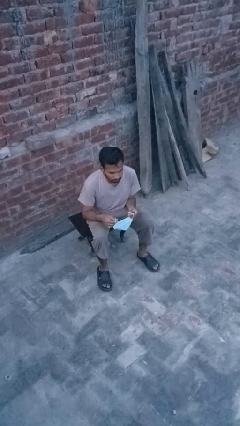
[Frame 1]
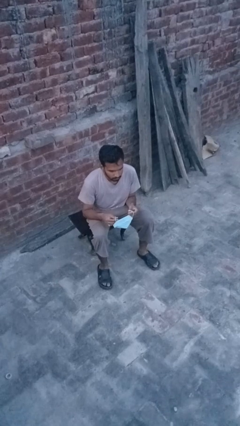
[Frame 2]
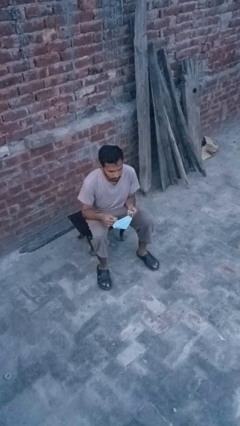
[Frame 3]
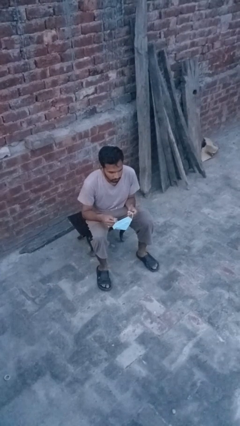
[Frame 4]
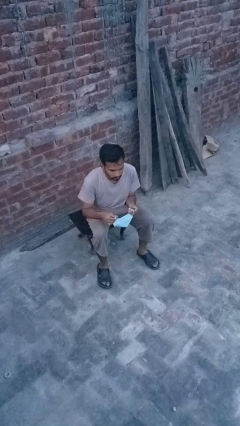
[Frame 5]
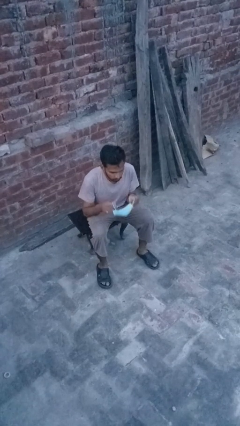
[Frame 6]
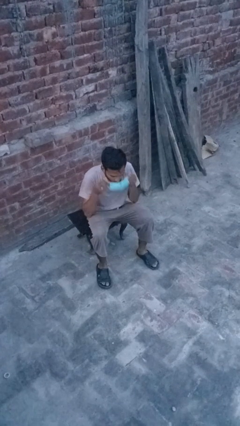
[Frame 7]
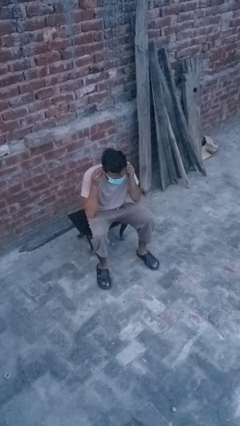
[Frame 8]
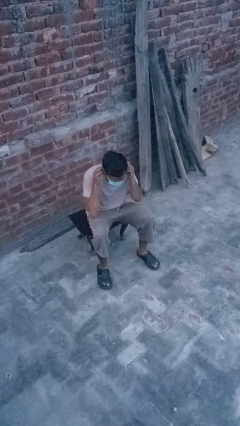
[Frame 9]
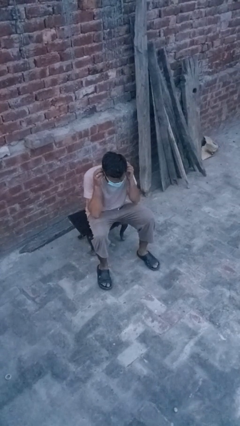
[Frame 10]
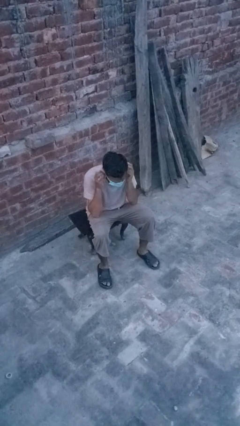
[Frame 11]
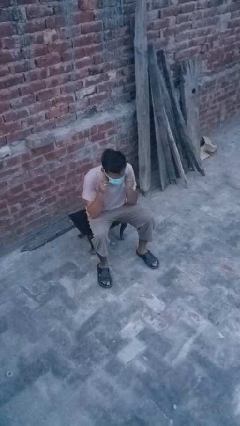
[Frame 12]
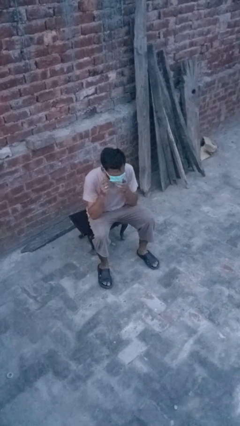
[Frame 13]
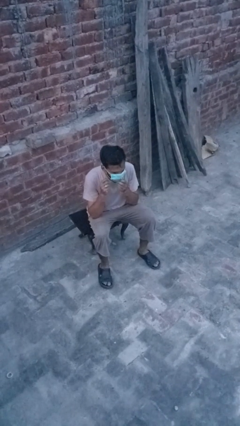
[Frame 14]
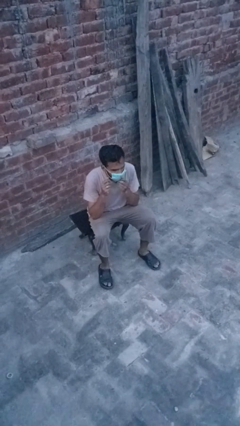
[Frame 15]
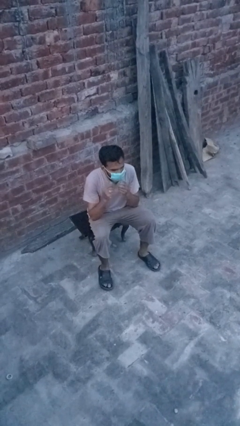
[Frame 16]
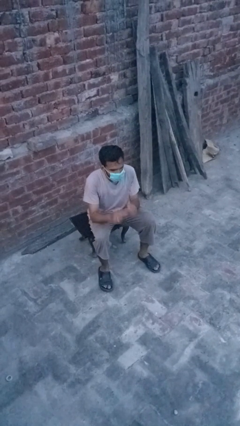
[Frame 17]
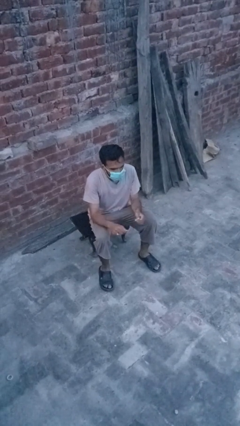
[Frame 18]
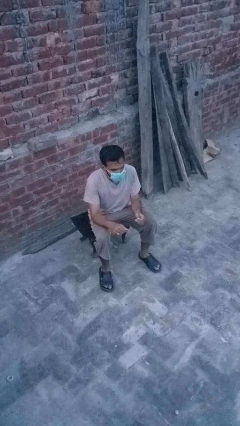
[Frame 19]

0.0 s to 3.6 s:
person puts on facemask

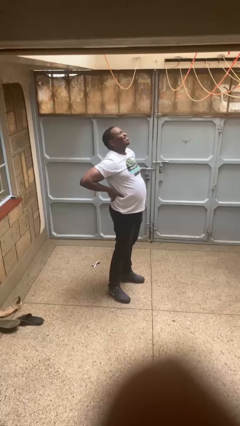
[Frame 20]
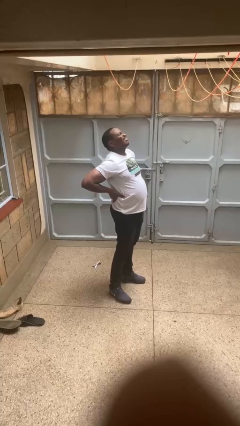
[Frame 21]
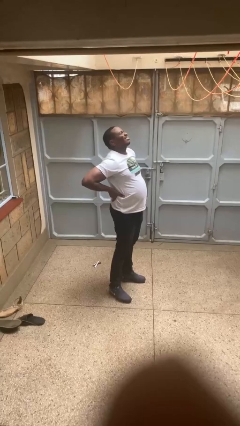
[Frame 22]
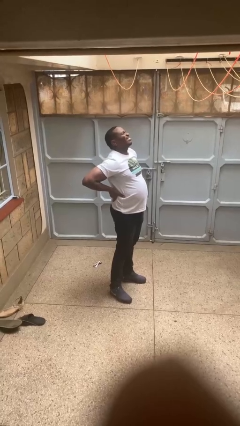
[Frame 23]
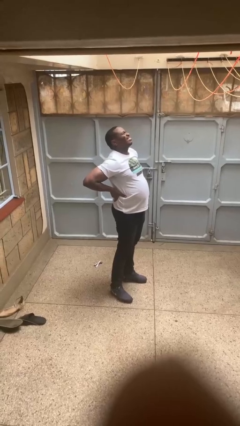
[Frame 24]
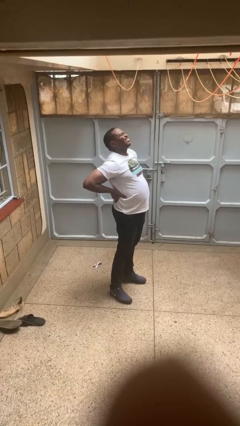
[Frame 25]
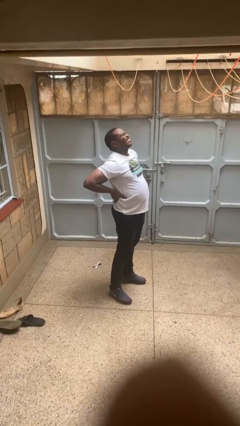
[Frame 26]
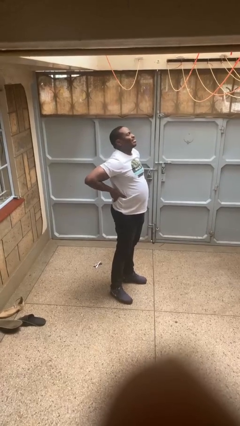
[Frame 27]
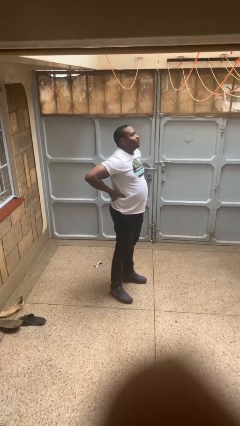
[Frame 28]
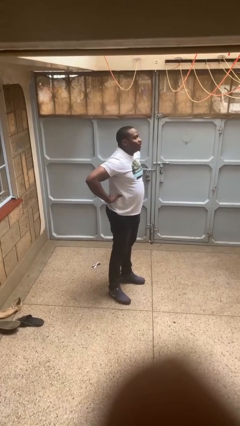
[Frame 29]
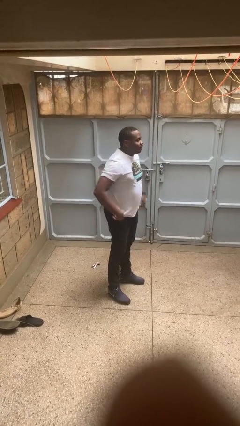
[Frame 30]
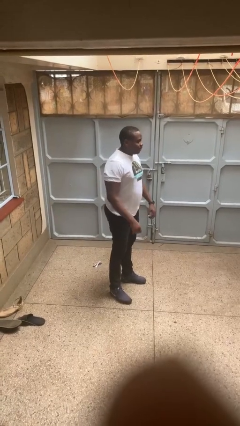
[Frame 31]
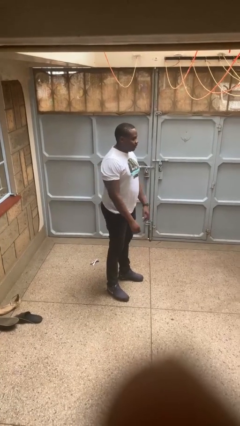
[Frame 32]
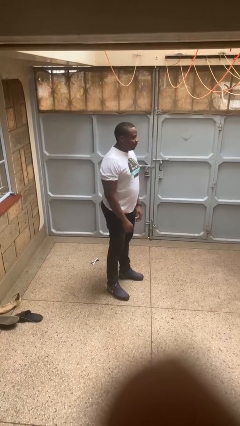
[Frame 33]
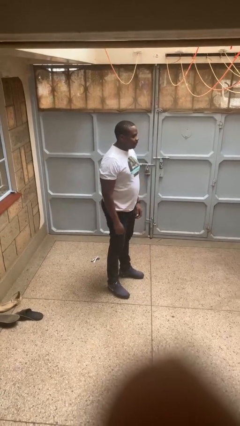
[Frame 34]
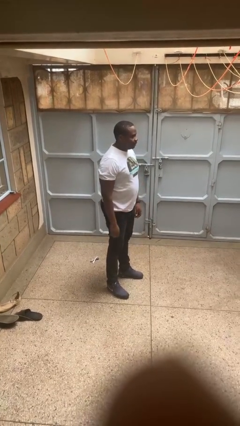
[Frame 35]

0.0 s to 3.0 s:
person stretches back

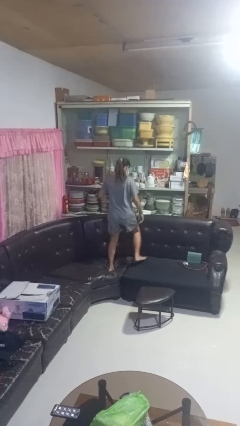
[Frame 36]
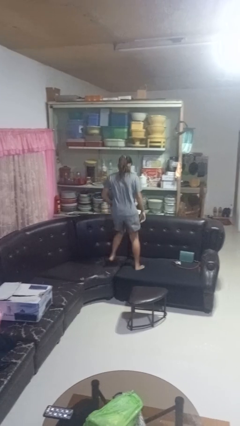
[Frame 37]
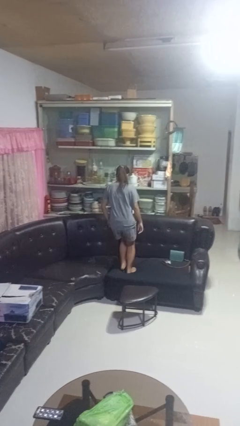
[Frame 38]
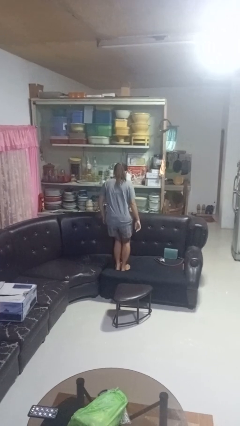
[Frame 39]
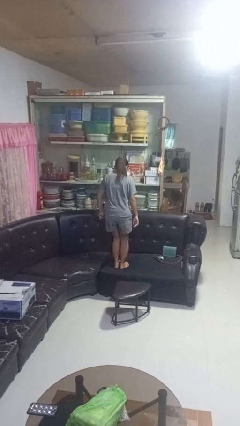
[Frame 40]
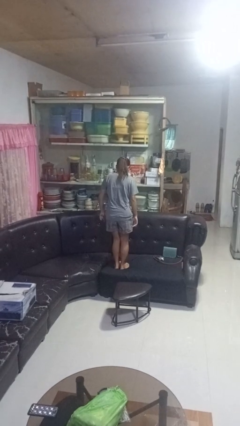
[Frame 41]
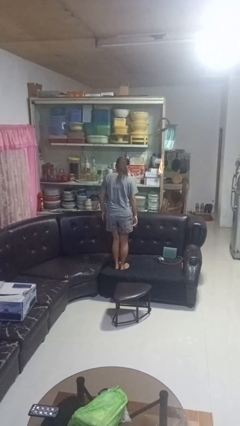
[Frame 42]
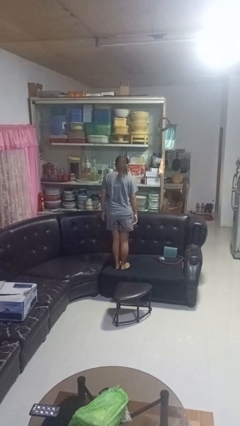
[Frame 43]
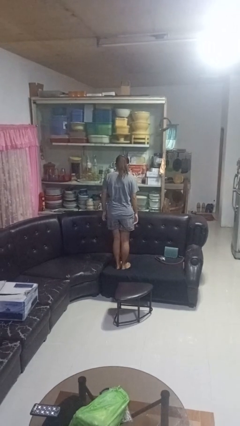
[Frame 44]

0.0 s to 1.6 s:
person jumps on couch

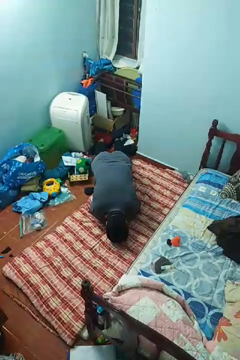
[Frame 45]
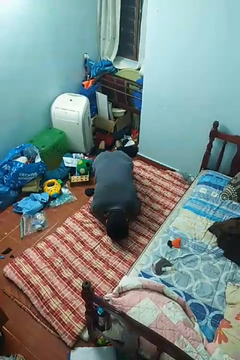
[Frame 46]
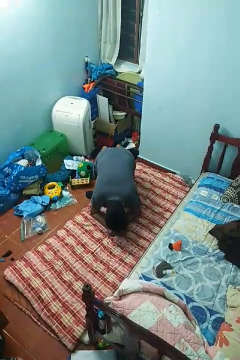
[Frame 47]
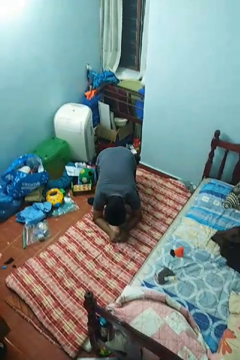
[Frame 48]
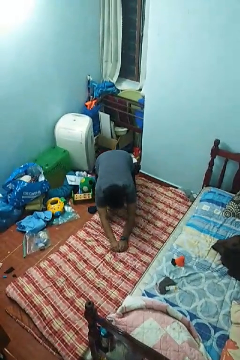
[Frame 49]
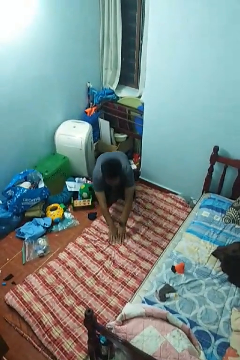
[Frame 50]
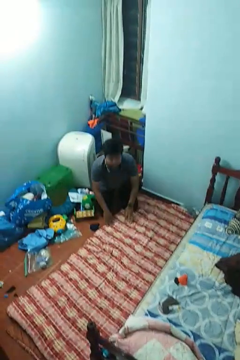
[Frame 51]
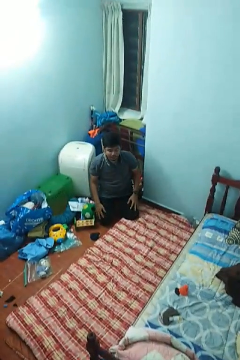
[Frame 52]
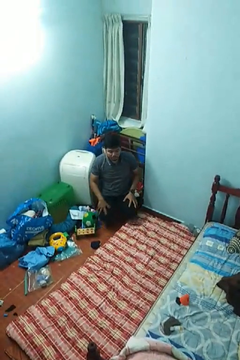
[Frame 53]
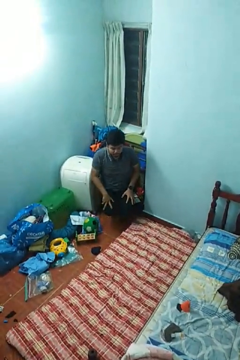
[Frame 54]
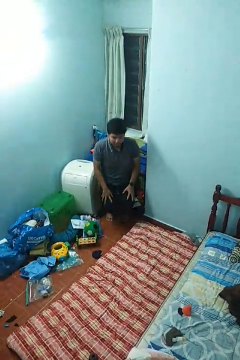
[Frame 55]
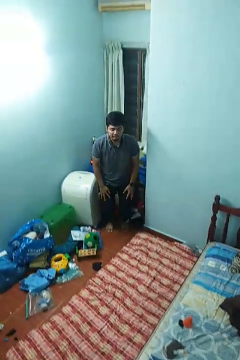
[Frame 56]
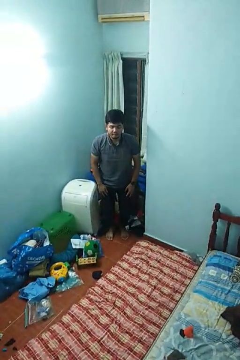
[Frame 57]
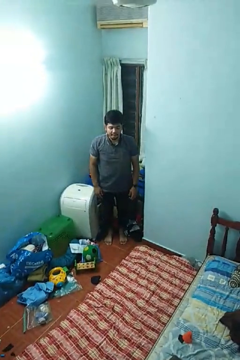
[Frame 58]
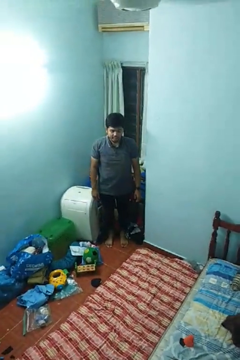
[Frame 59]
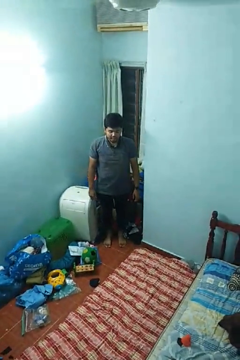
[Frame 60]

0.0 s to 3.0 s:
person stands up from floor

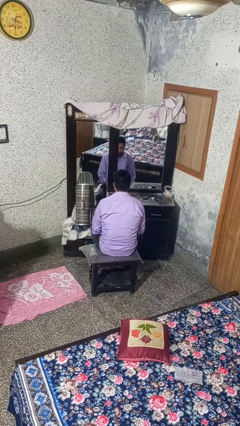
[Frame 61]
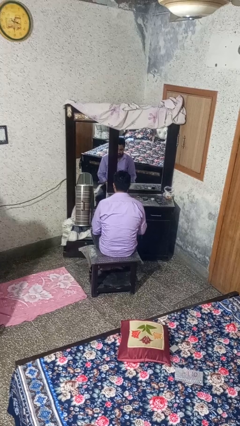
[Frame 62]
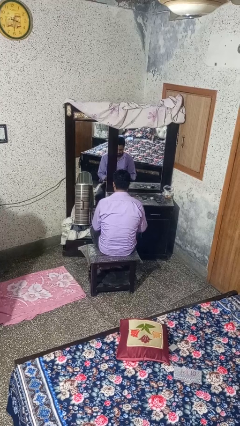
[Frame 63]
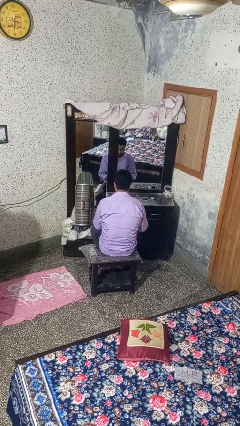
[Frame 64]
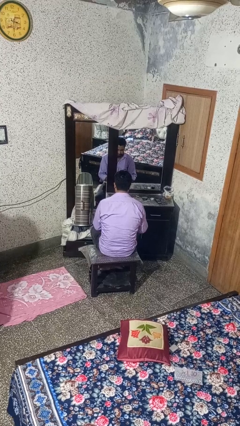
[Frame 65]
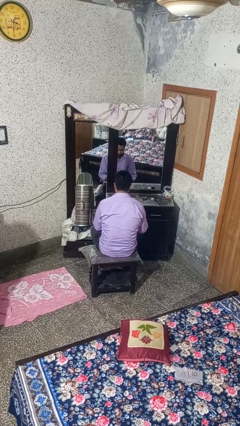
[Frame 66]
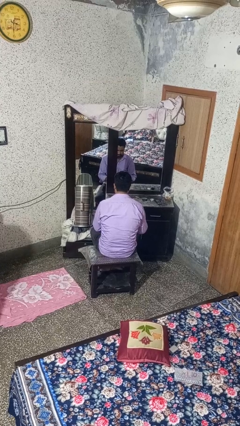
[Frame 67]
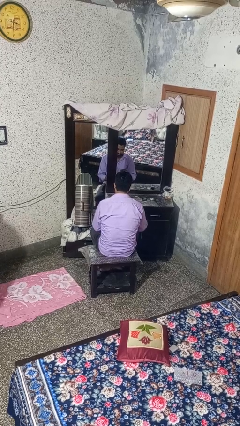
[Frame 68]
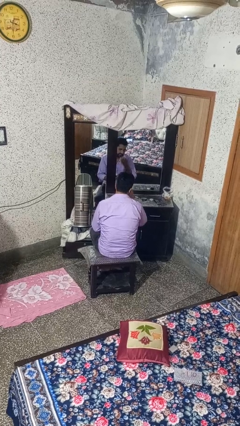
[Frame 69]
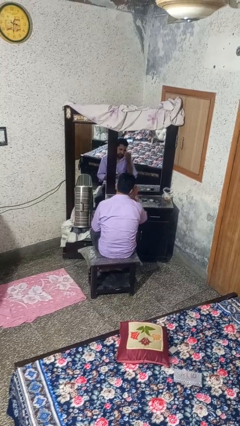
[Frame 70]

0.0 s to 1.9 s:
person applies foundation makeup

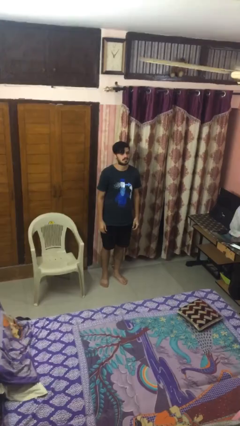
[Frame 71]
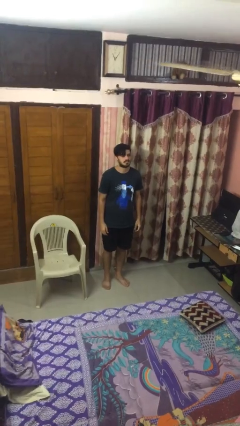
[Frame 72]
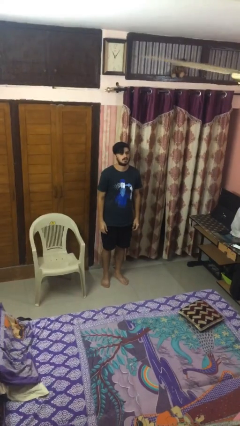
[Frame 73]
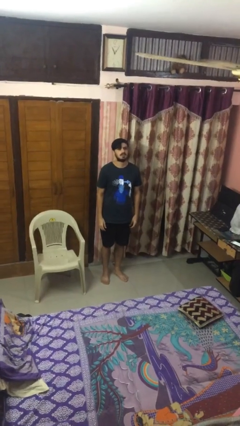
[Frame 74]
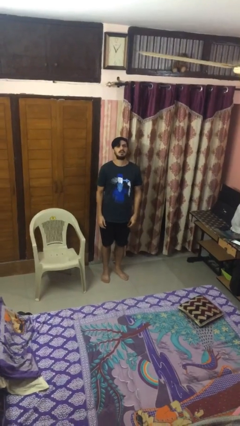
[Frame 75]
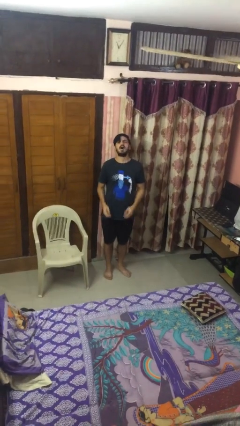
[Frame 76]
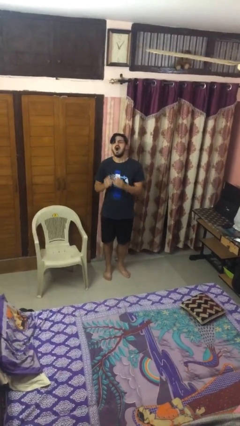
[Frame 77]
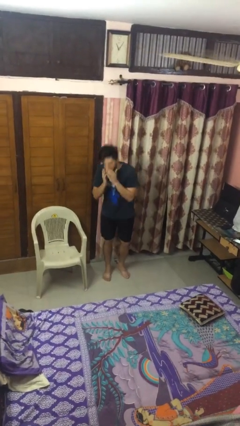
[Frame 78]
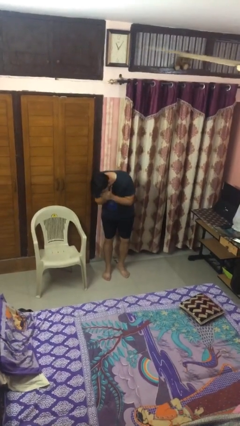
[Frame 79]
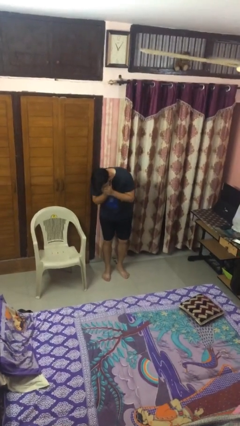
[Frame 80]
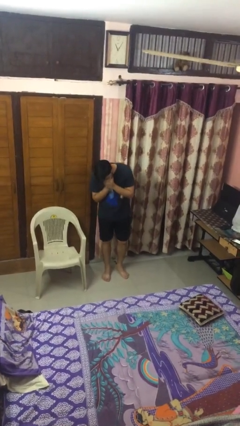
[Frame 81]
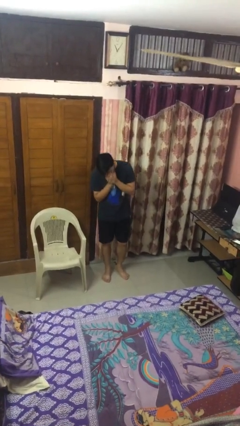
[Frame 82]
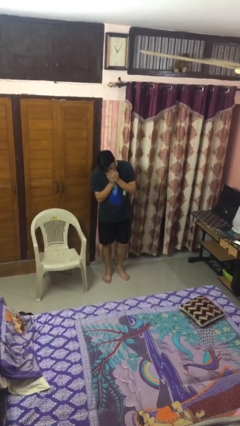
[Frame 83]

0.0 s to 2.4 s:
person sneezes into hand

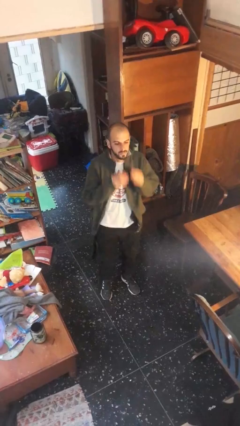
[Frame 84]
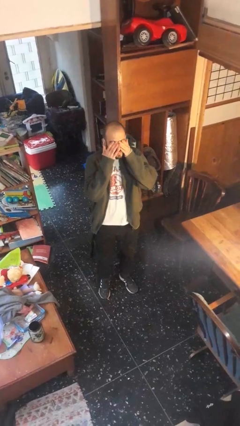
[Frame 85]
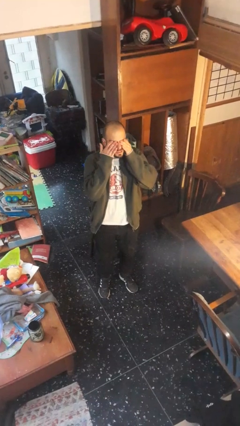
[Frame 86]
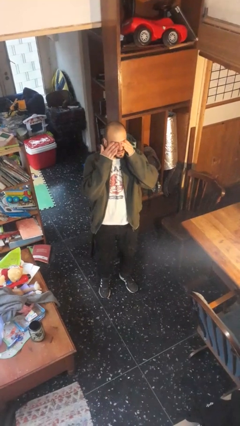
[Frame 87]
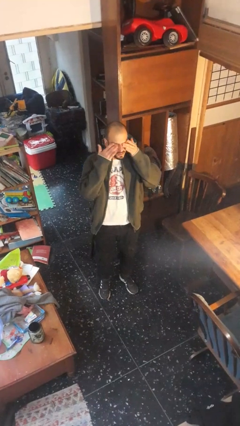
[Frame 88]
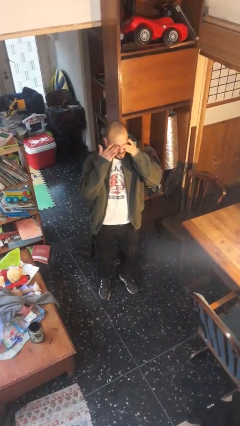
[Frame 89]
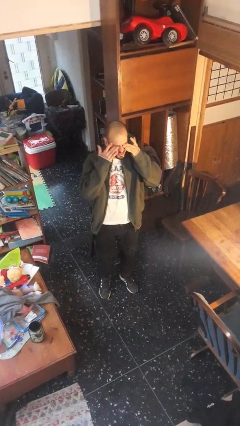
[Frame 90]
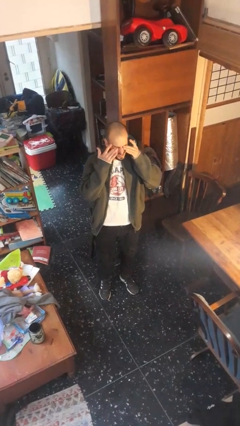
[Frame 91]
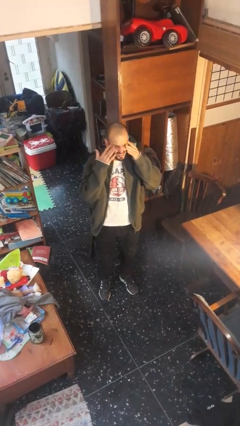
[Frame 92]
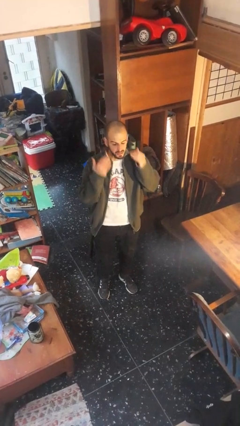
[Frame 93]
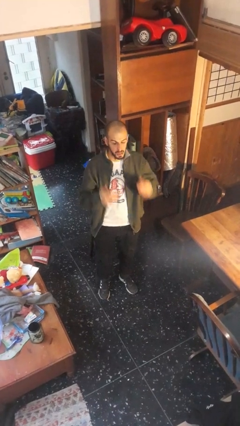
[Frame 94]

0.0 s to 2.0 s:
person rubs eyes
